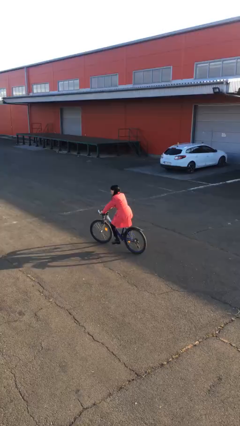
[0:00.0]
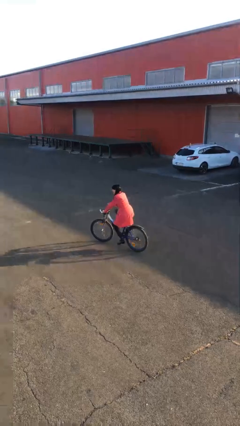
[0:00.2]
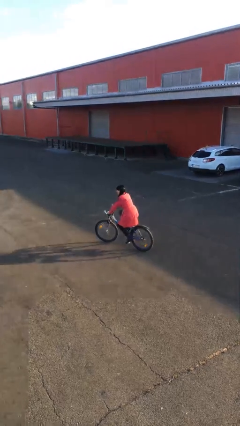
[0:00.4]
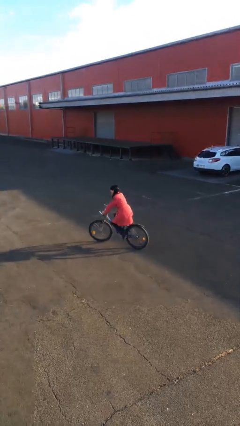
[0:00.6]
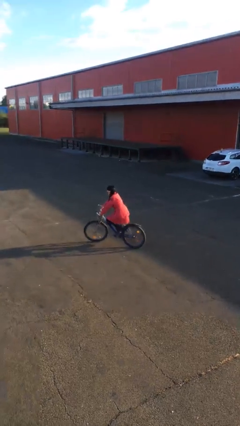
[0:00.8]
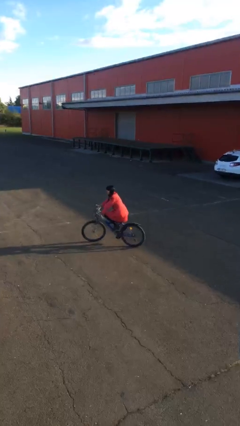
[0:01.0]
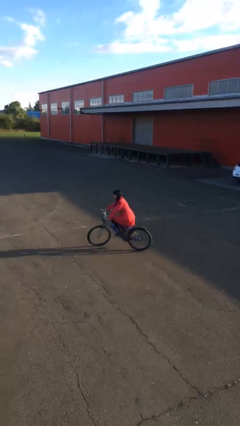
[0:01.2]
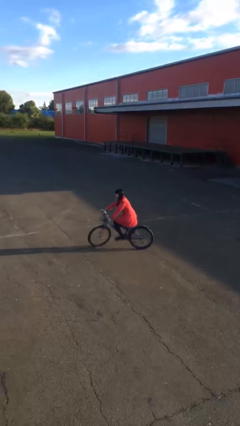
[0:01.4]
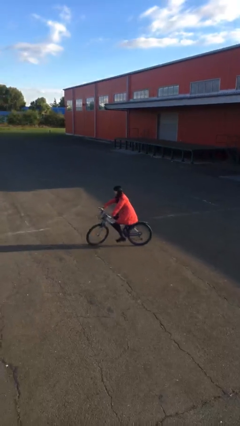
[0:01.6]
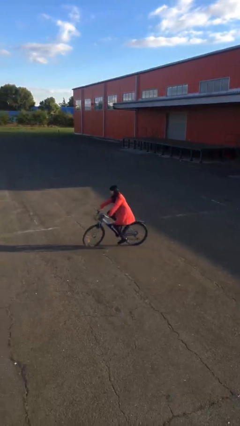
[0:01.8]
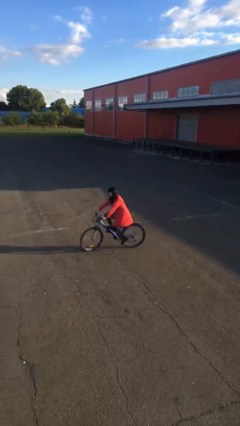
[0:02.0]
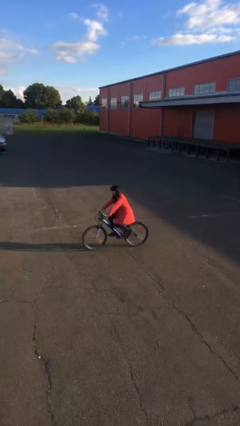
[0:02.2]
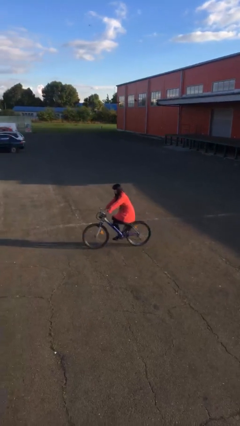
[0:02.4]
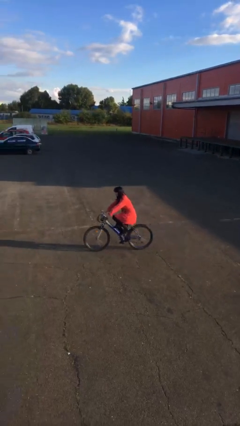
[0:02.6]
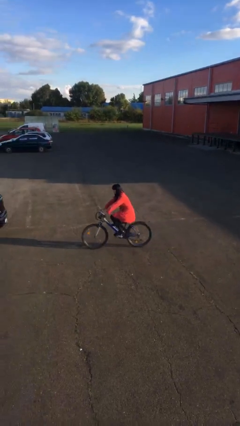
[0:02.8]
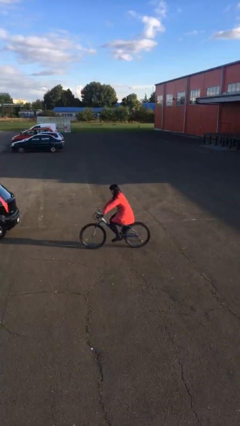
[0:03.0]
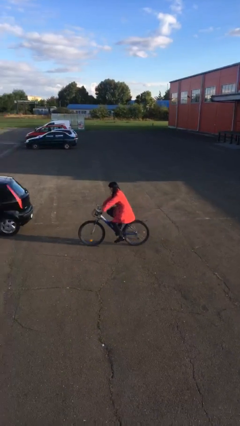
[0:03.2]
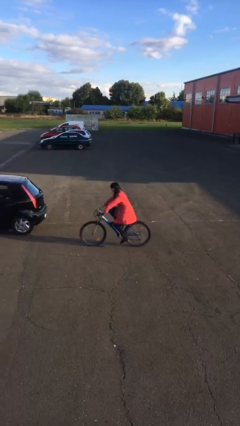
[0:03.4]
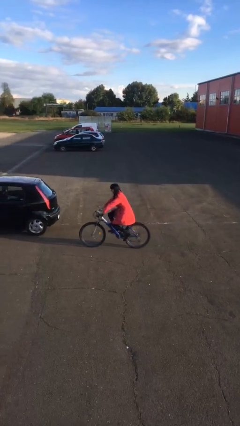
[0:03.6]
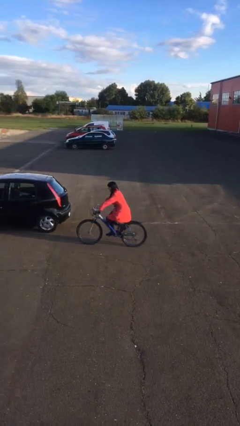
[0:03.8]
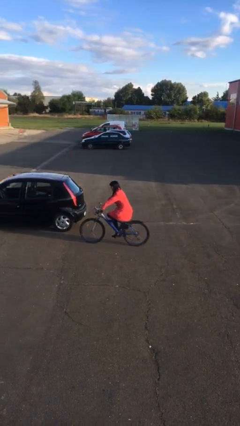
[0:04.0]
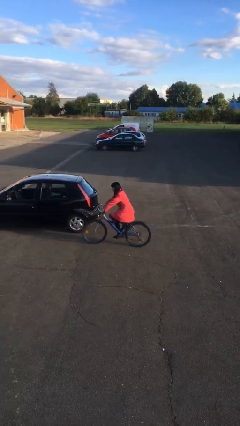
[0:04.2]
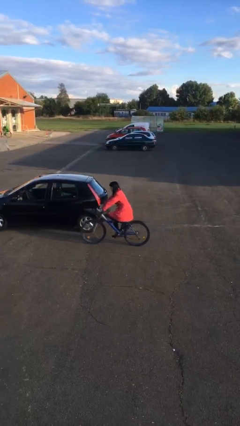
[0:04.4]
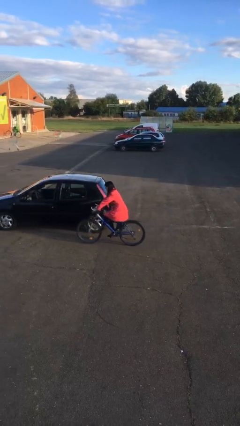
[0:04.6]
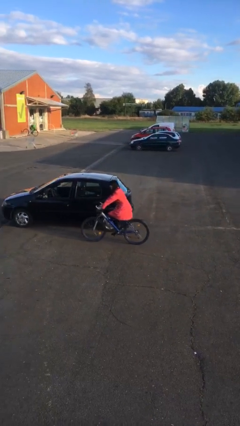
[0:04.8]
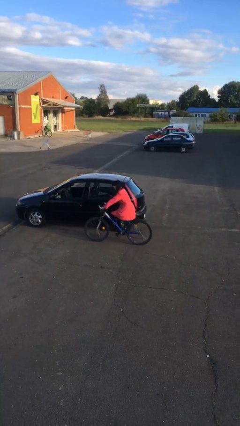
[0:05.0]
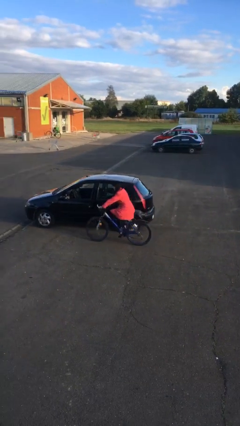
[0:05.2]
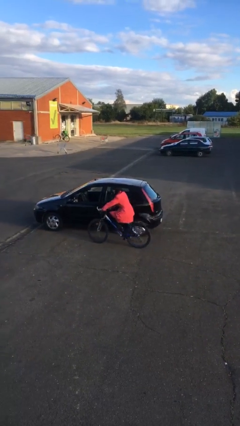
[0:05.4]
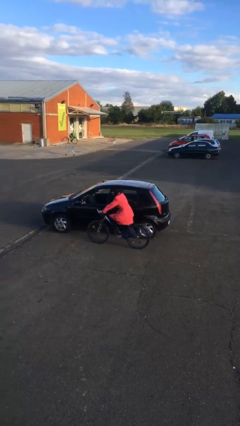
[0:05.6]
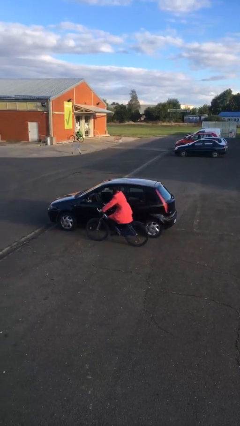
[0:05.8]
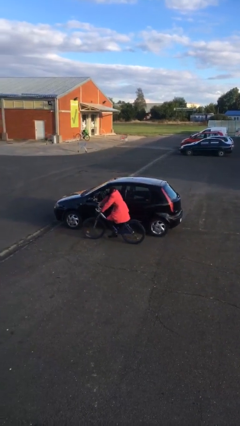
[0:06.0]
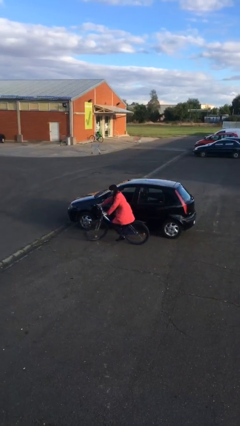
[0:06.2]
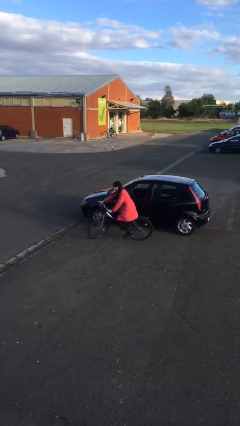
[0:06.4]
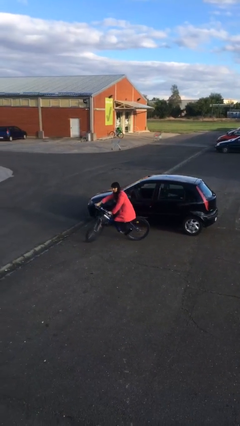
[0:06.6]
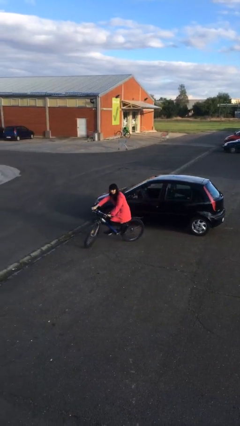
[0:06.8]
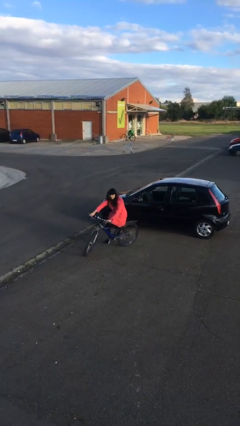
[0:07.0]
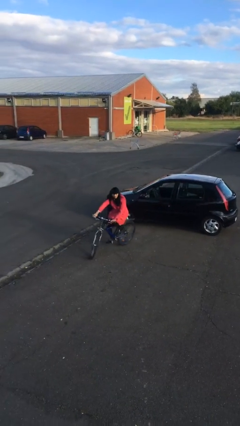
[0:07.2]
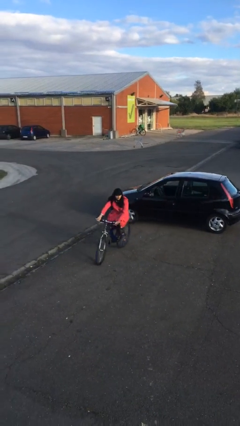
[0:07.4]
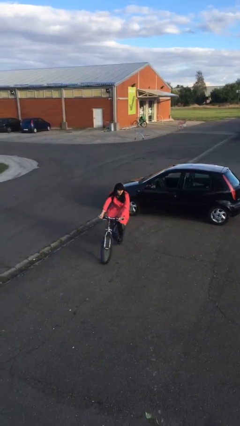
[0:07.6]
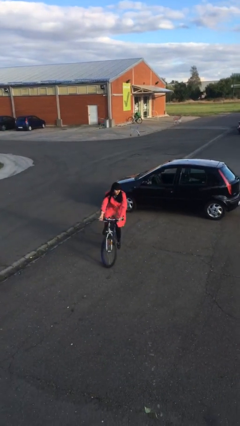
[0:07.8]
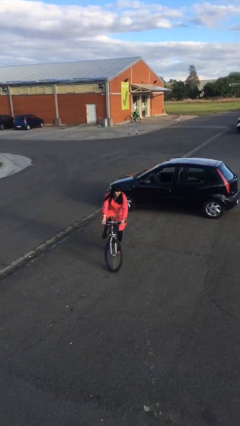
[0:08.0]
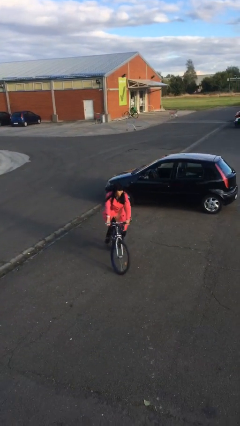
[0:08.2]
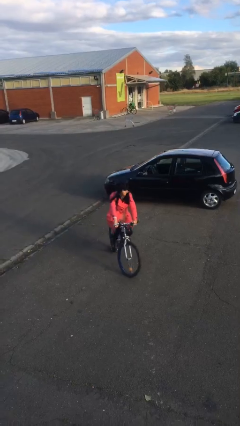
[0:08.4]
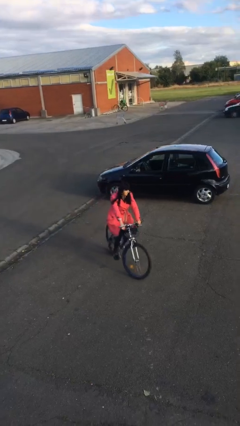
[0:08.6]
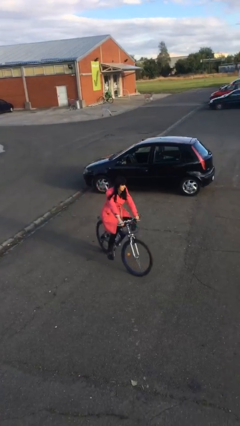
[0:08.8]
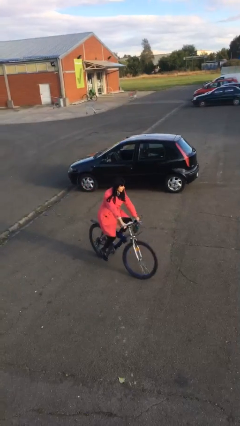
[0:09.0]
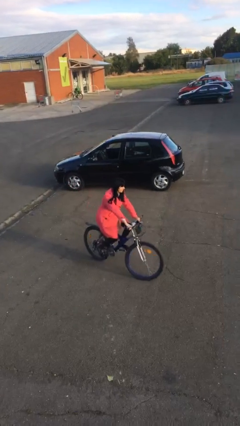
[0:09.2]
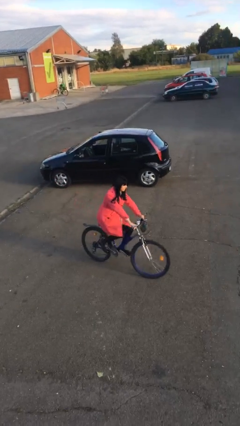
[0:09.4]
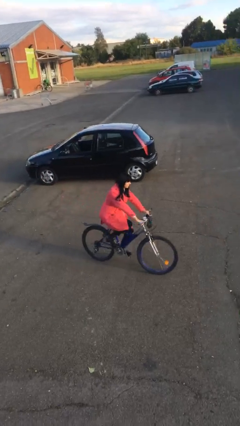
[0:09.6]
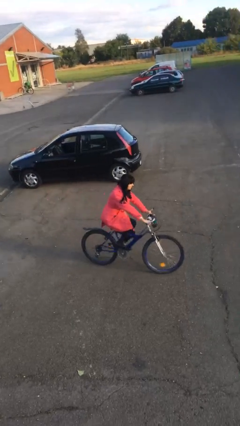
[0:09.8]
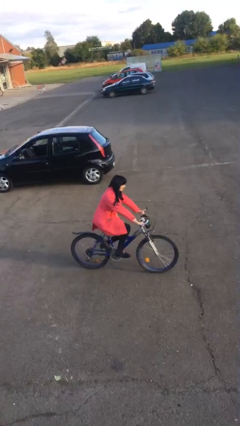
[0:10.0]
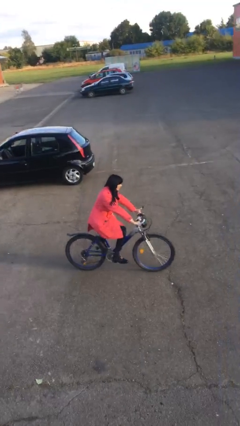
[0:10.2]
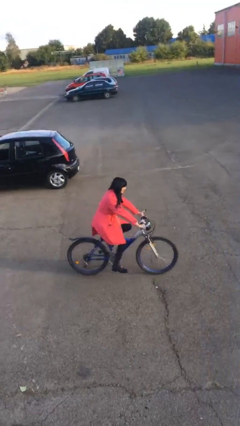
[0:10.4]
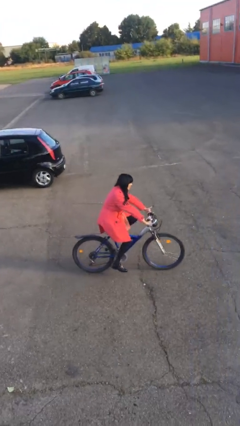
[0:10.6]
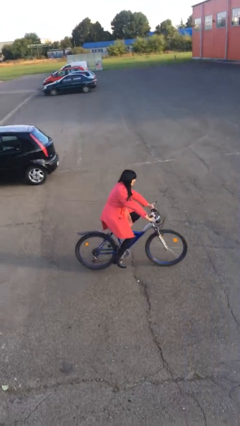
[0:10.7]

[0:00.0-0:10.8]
person rides bicycle

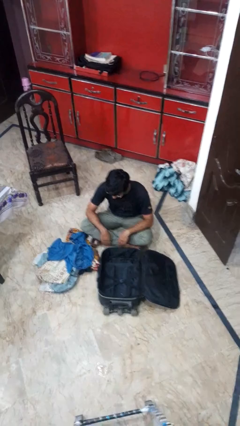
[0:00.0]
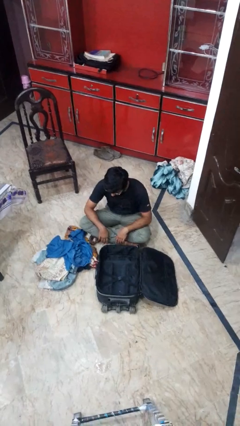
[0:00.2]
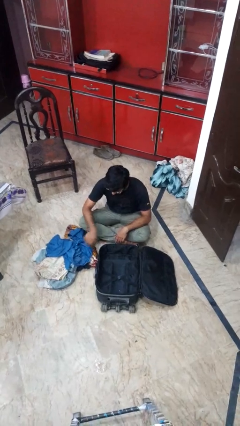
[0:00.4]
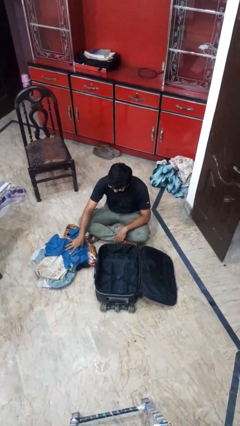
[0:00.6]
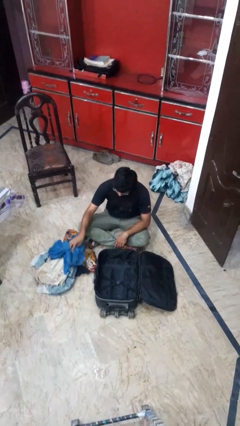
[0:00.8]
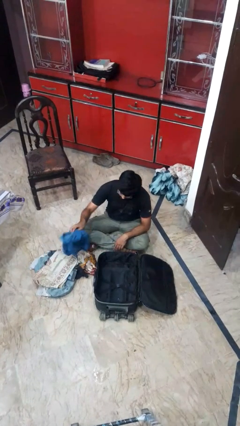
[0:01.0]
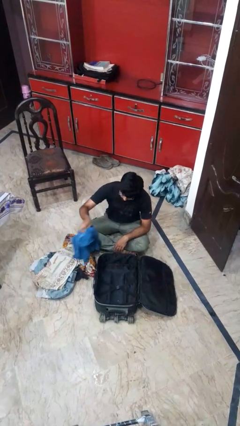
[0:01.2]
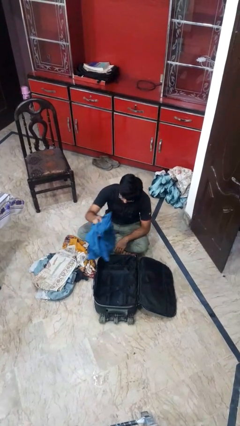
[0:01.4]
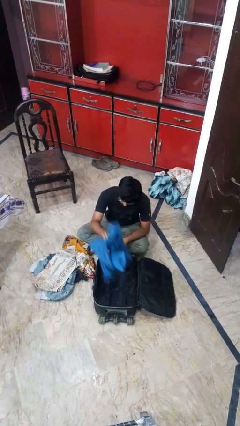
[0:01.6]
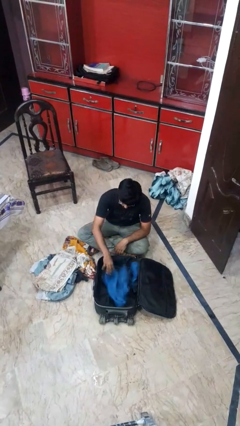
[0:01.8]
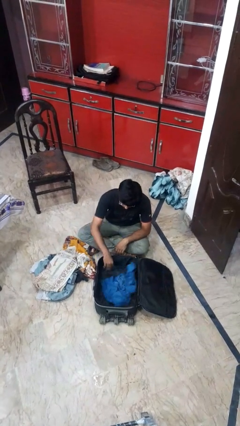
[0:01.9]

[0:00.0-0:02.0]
person loads clothes into suitcase

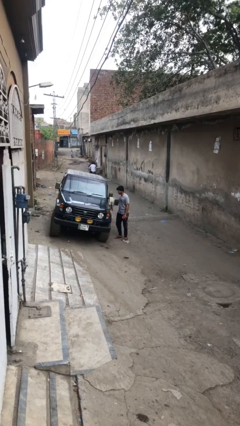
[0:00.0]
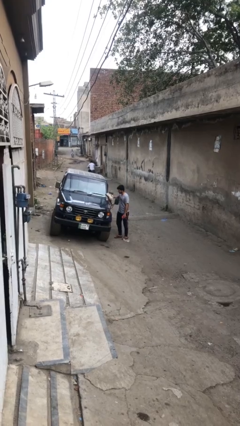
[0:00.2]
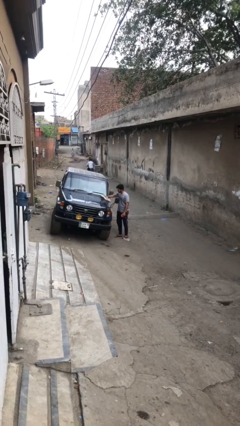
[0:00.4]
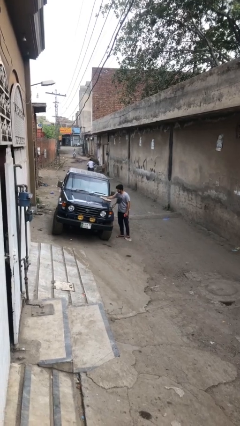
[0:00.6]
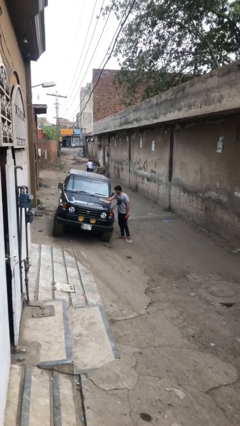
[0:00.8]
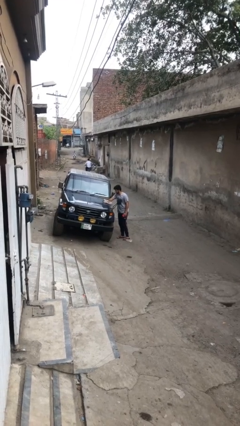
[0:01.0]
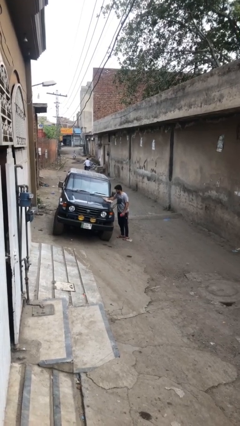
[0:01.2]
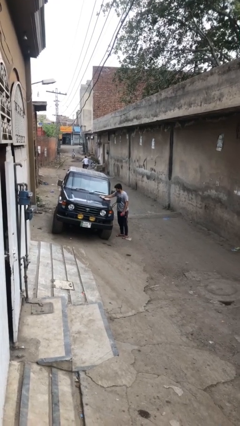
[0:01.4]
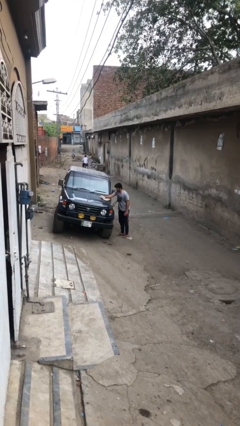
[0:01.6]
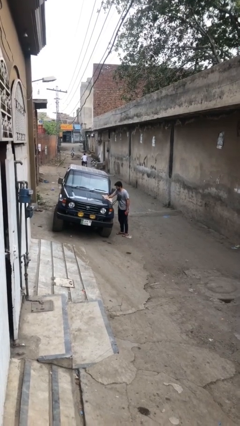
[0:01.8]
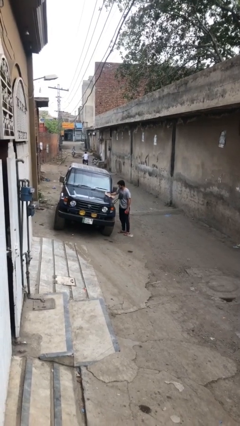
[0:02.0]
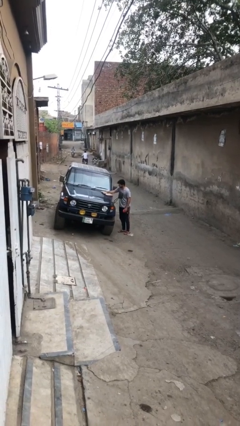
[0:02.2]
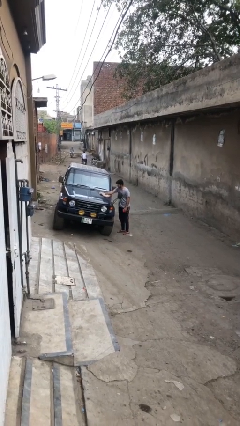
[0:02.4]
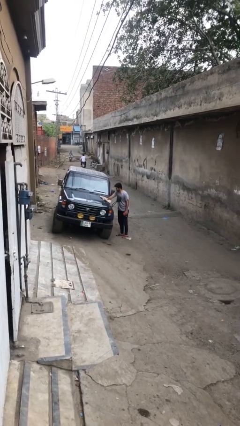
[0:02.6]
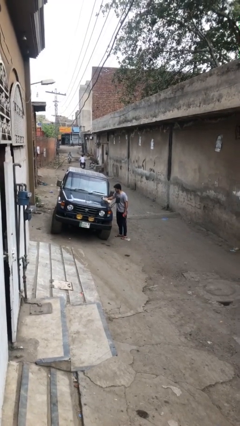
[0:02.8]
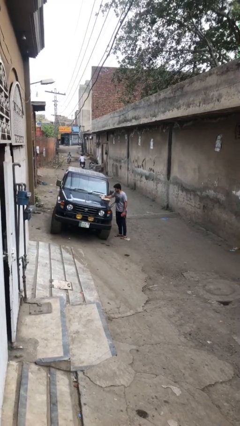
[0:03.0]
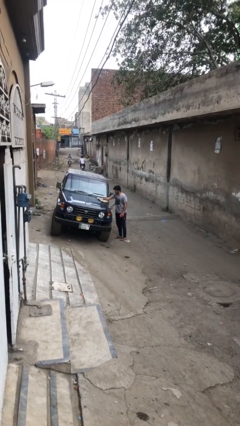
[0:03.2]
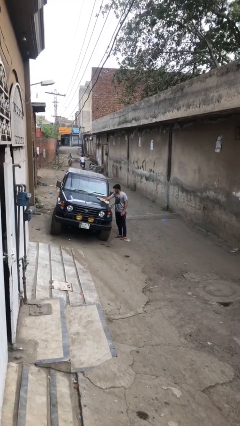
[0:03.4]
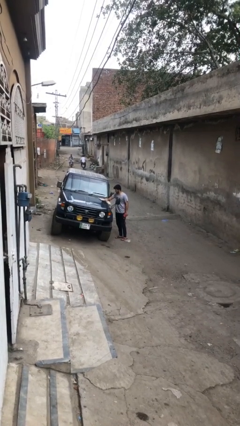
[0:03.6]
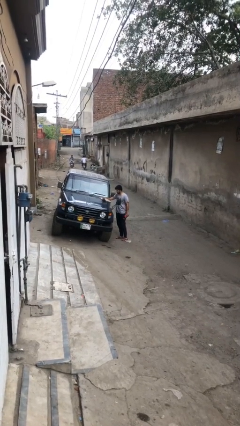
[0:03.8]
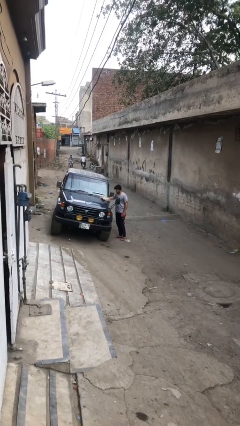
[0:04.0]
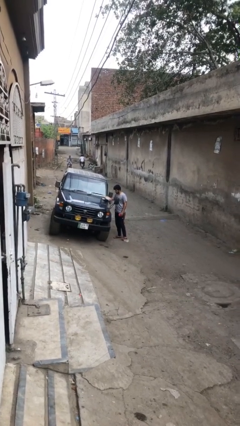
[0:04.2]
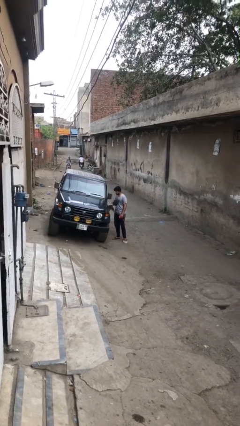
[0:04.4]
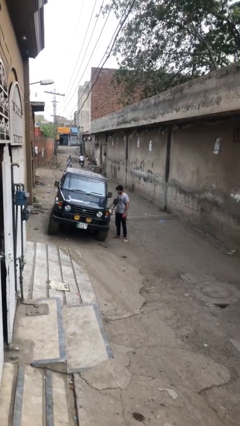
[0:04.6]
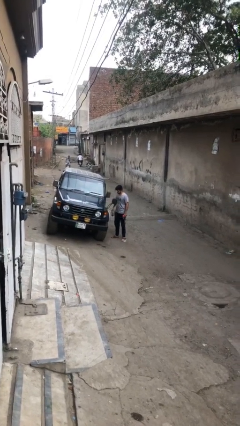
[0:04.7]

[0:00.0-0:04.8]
person polishes car with rag
